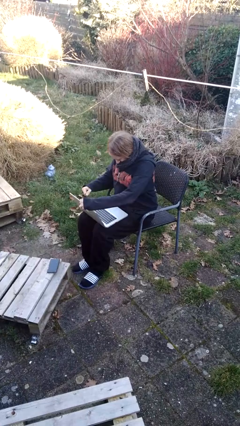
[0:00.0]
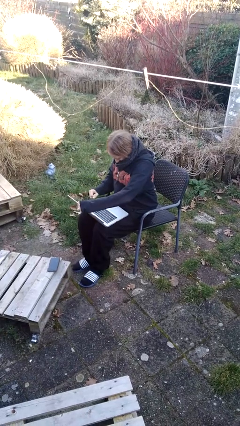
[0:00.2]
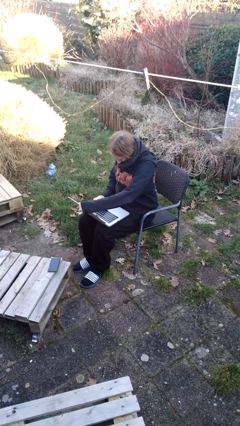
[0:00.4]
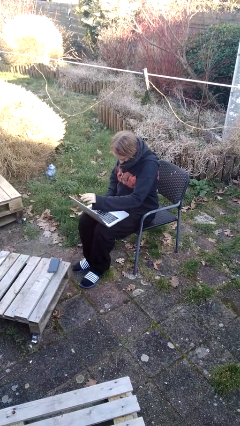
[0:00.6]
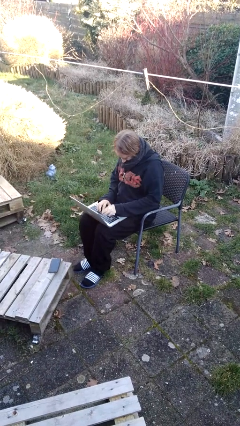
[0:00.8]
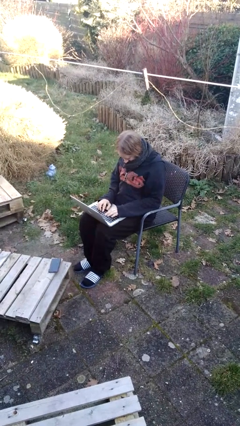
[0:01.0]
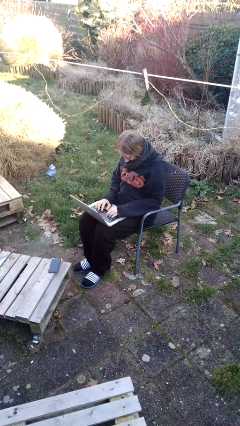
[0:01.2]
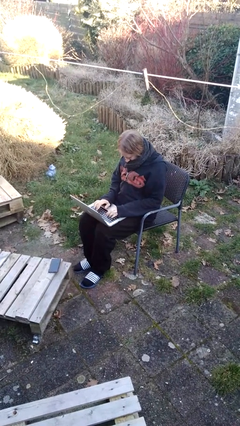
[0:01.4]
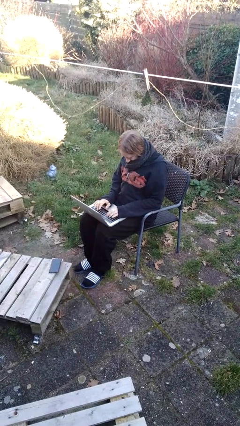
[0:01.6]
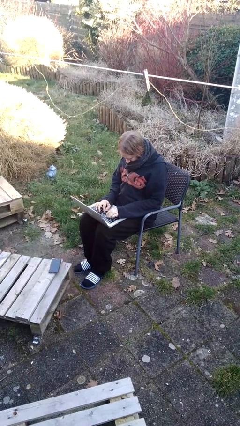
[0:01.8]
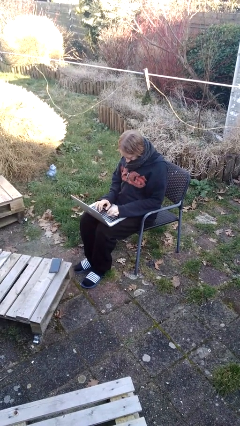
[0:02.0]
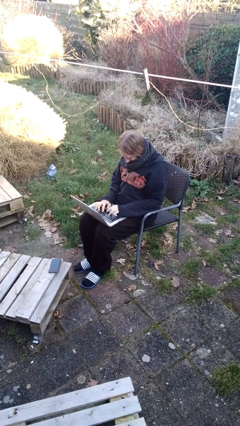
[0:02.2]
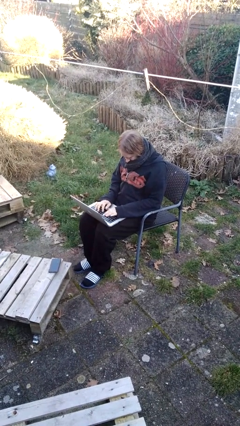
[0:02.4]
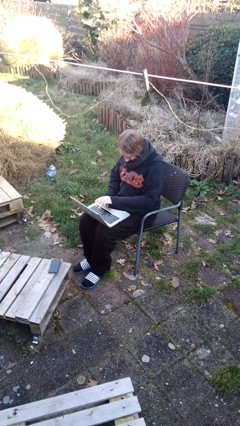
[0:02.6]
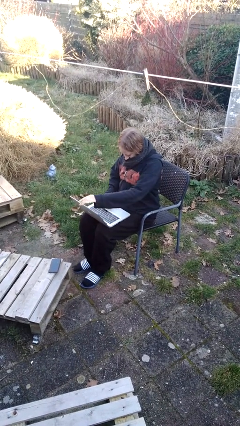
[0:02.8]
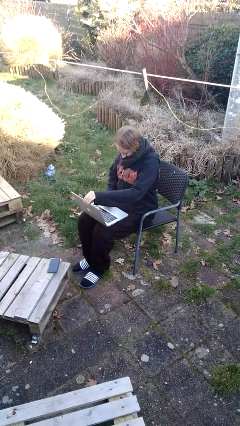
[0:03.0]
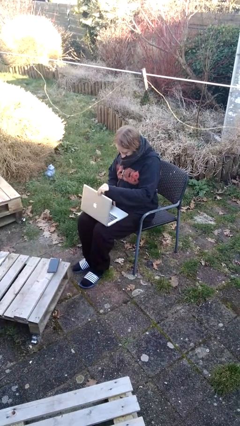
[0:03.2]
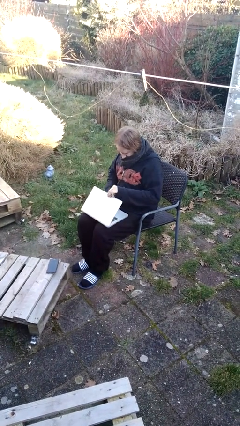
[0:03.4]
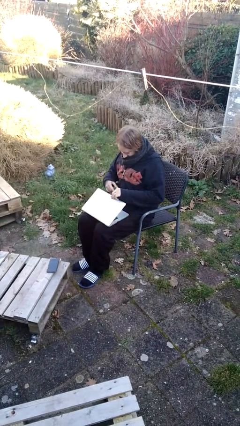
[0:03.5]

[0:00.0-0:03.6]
person interacts with laptop

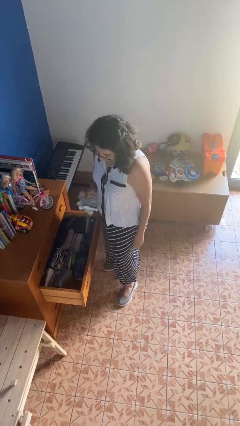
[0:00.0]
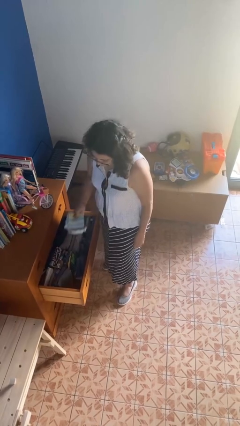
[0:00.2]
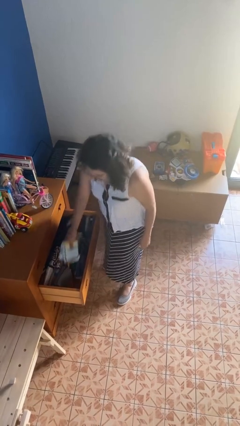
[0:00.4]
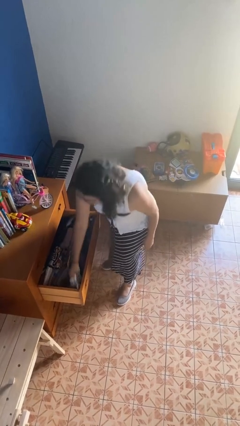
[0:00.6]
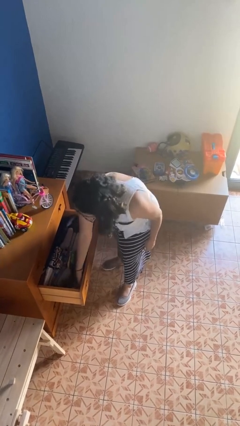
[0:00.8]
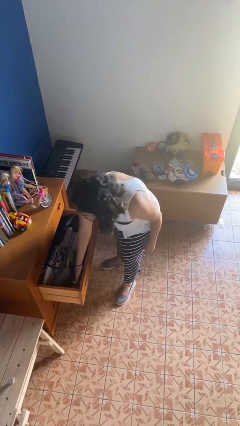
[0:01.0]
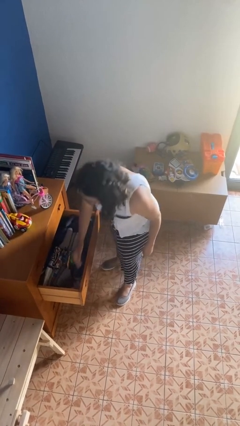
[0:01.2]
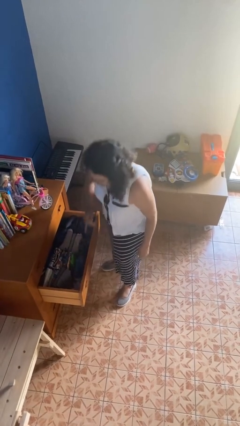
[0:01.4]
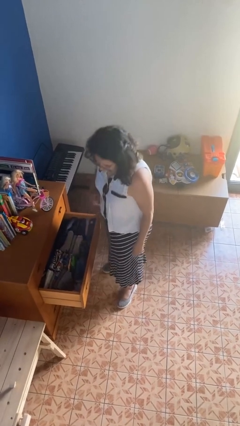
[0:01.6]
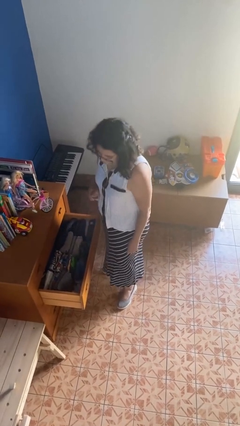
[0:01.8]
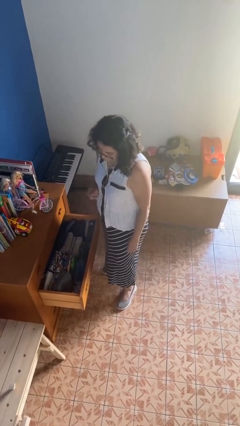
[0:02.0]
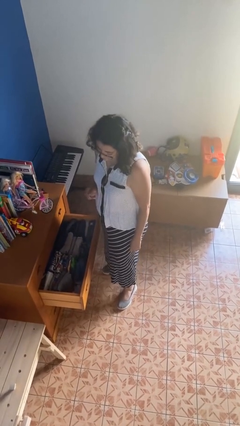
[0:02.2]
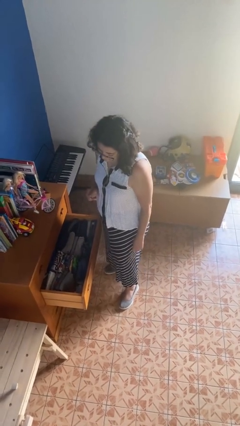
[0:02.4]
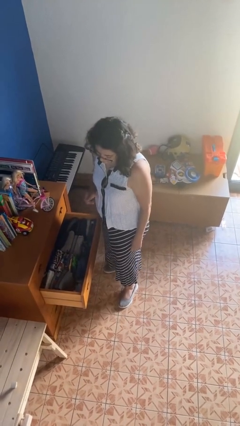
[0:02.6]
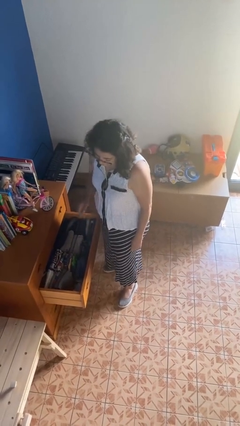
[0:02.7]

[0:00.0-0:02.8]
person puts clothes into dresser

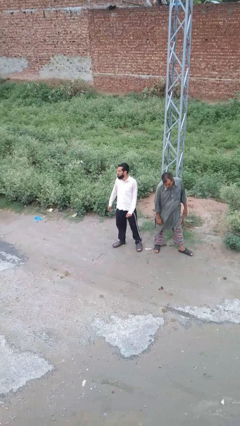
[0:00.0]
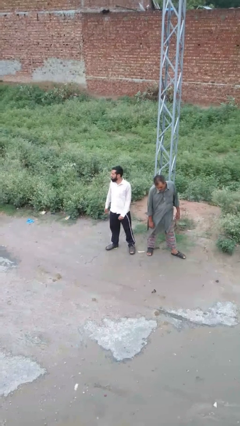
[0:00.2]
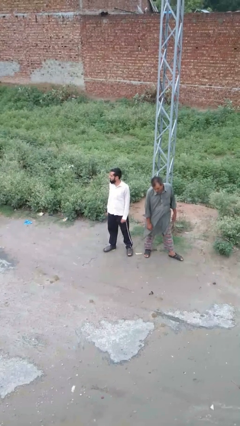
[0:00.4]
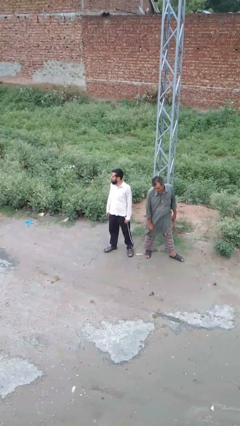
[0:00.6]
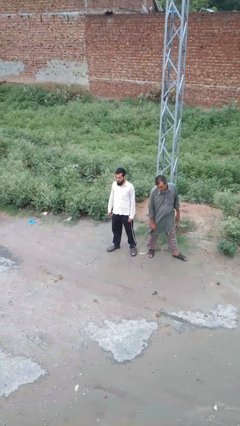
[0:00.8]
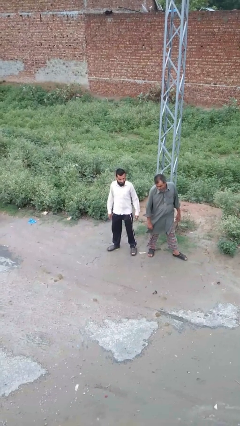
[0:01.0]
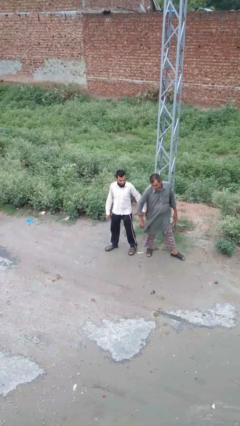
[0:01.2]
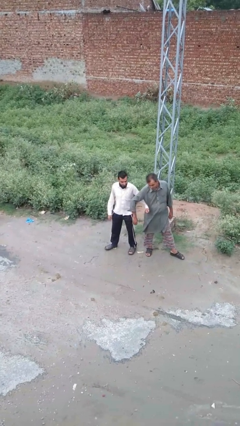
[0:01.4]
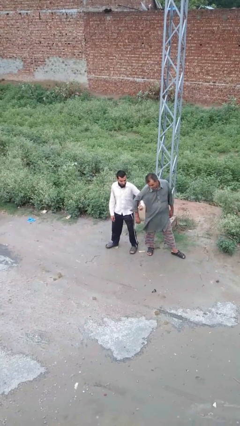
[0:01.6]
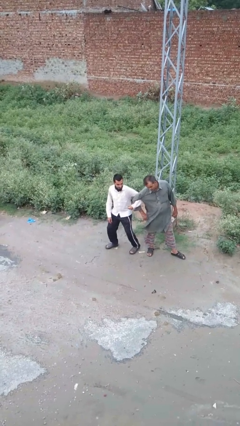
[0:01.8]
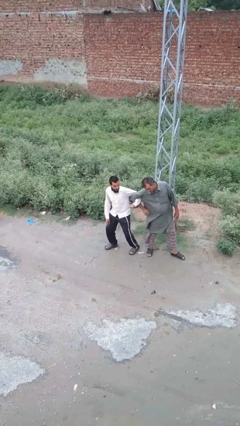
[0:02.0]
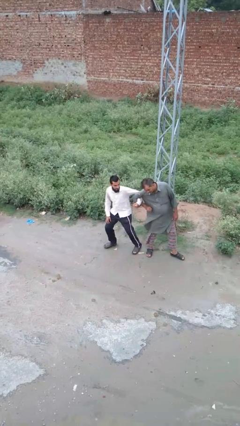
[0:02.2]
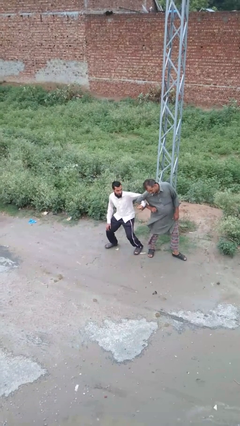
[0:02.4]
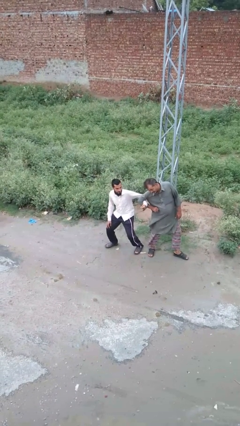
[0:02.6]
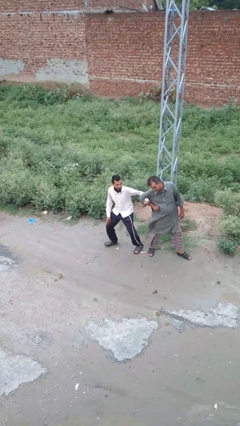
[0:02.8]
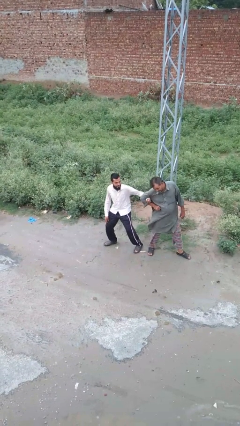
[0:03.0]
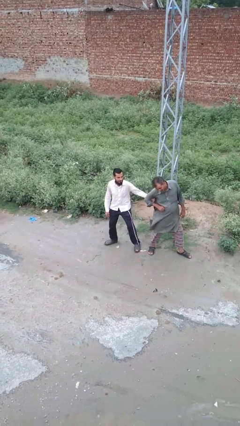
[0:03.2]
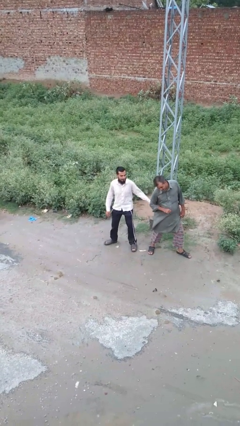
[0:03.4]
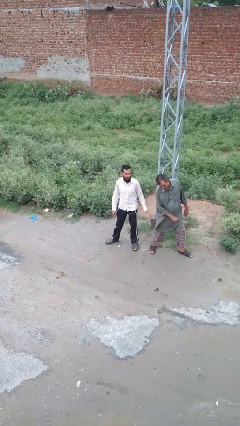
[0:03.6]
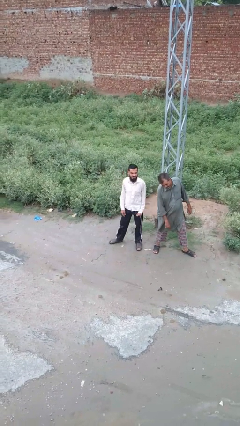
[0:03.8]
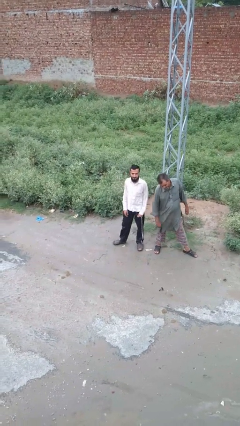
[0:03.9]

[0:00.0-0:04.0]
person grabs person by forearm

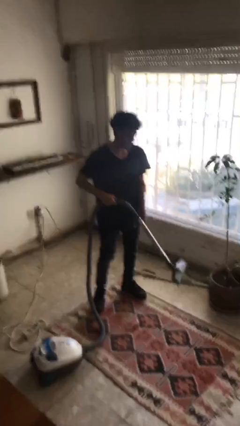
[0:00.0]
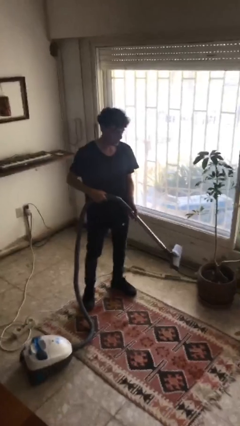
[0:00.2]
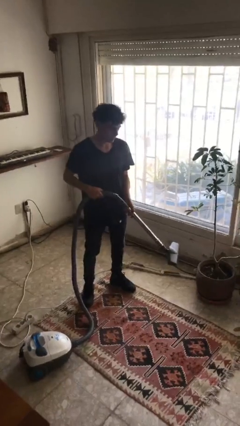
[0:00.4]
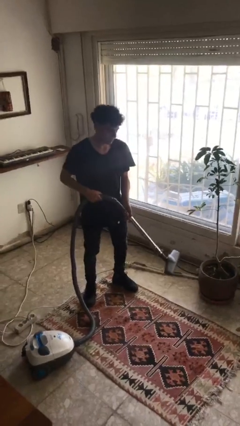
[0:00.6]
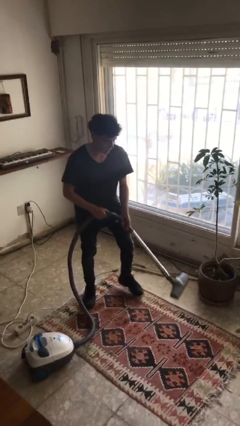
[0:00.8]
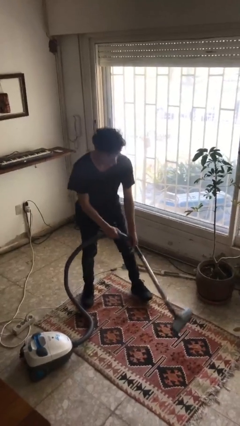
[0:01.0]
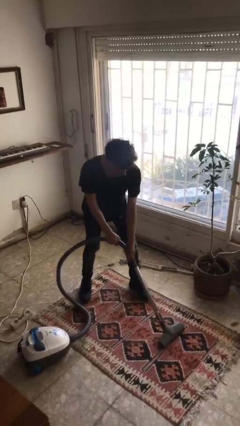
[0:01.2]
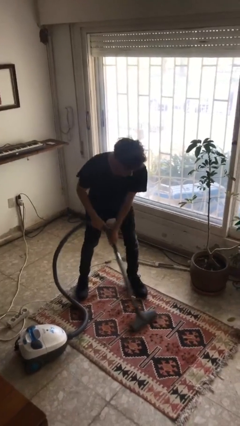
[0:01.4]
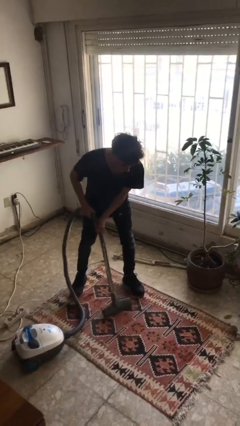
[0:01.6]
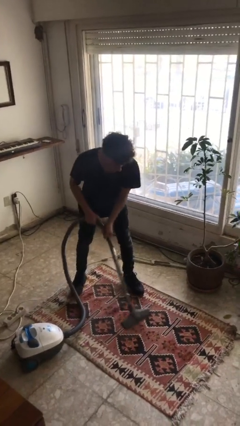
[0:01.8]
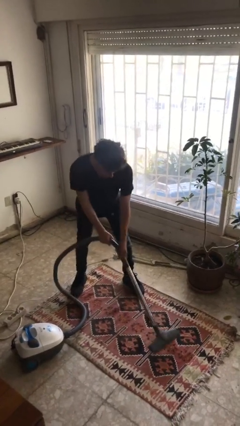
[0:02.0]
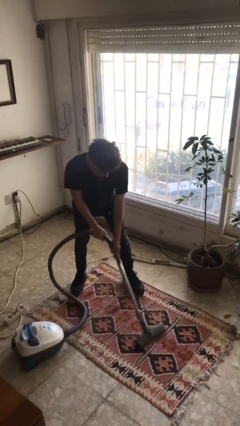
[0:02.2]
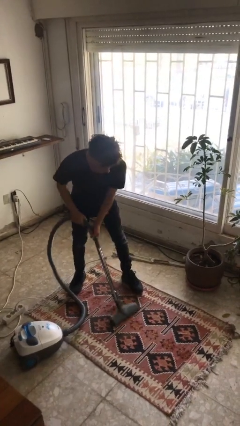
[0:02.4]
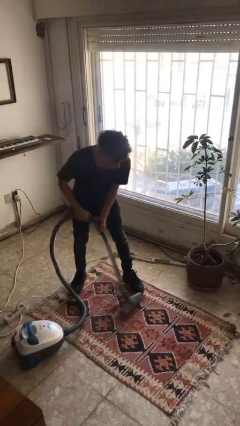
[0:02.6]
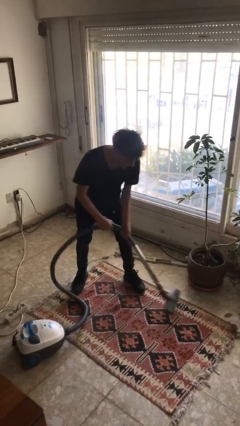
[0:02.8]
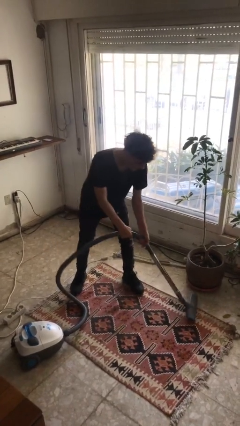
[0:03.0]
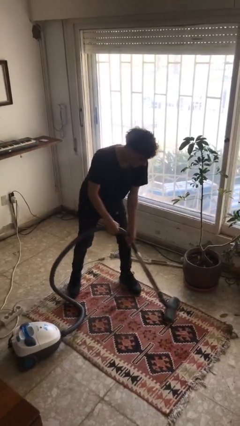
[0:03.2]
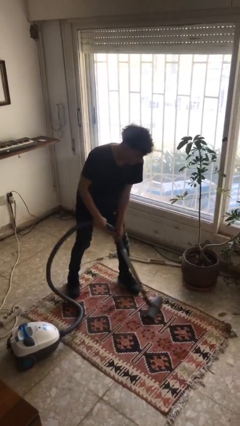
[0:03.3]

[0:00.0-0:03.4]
person vacuums carpet

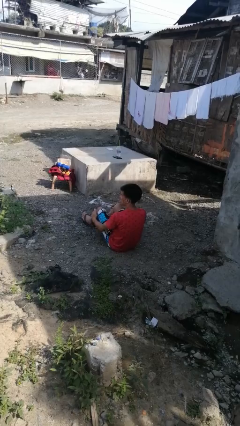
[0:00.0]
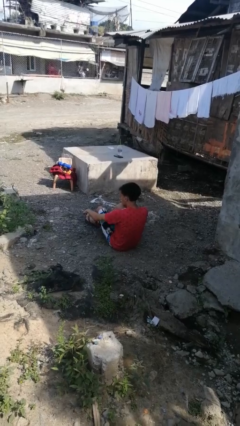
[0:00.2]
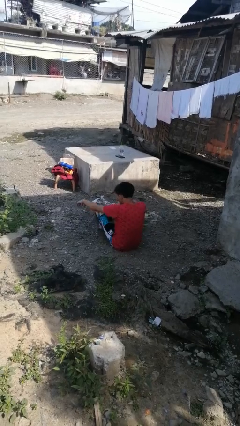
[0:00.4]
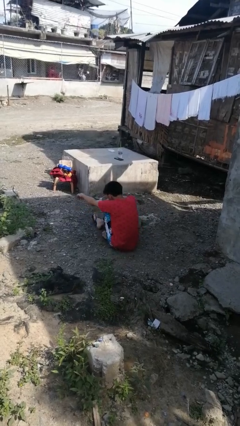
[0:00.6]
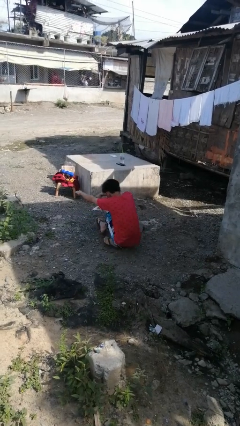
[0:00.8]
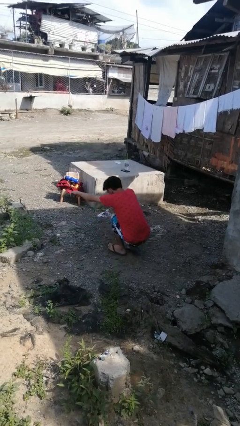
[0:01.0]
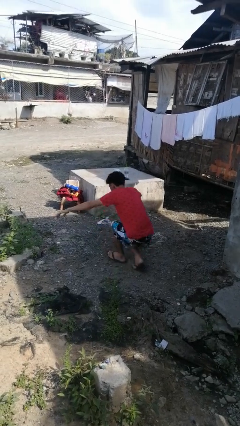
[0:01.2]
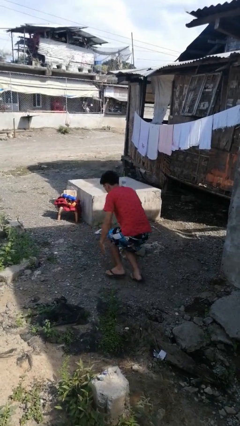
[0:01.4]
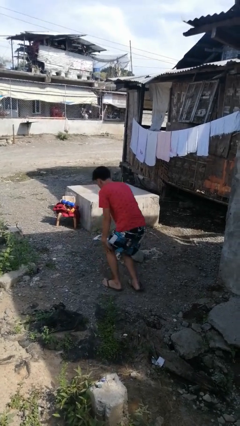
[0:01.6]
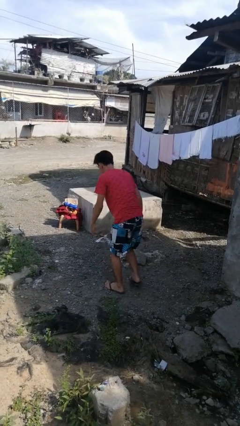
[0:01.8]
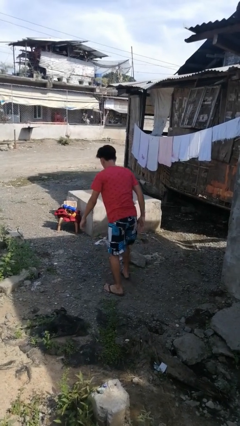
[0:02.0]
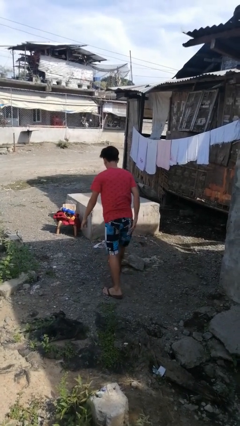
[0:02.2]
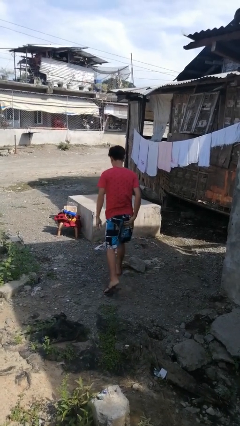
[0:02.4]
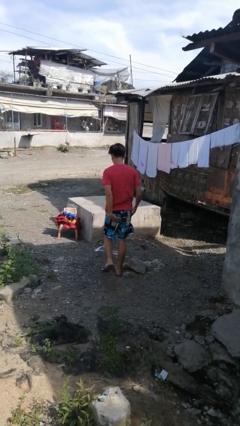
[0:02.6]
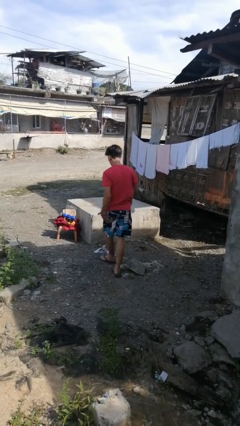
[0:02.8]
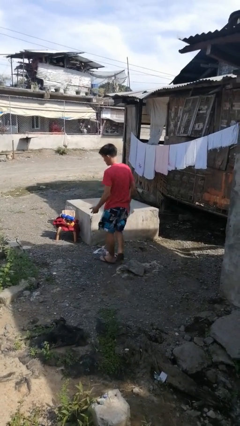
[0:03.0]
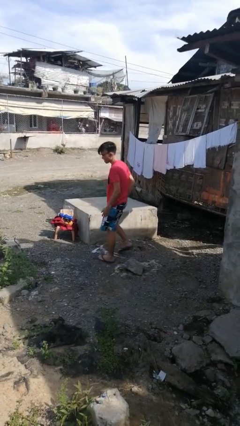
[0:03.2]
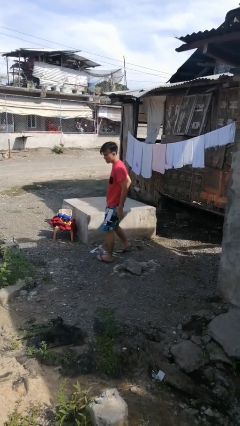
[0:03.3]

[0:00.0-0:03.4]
person stands up from floor

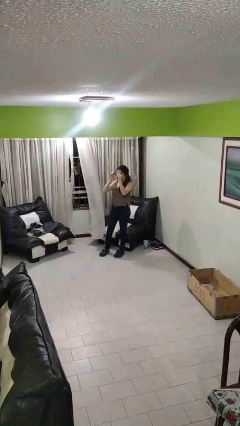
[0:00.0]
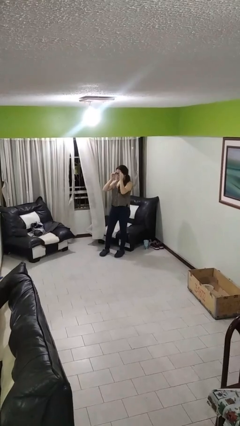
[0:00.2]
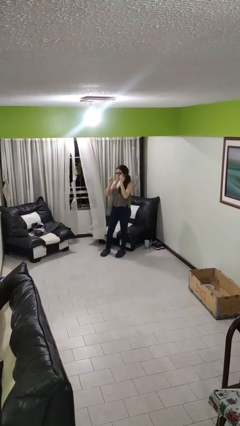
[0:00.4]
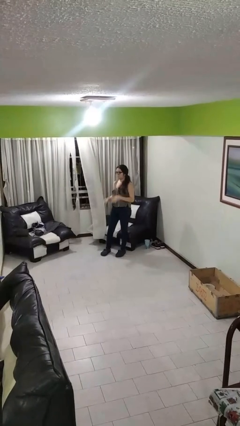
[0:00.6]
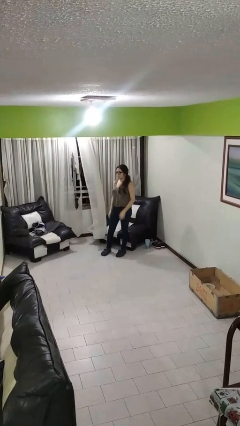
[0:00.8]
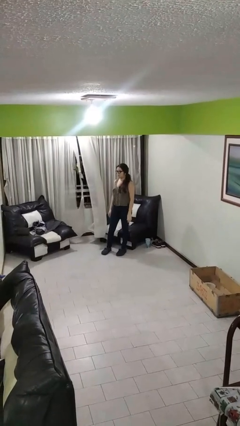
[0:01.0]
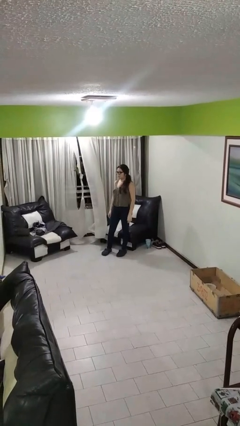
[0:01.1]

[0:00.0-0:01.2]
person puts on glasses
